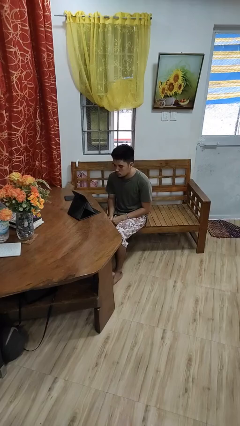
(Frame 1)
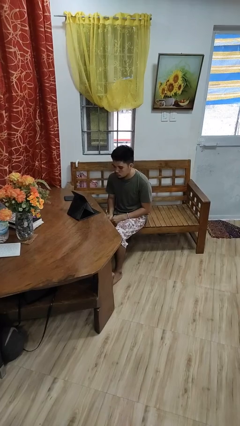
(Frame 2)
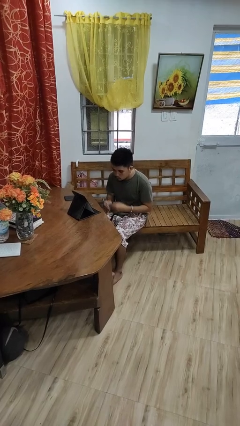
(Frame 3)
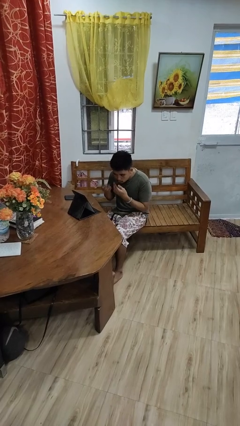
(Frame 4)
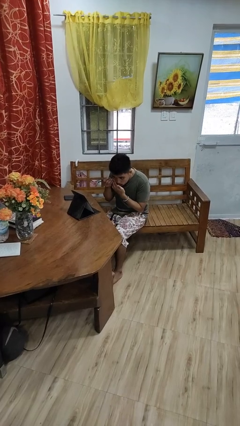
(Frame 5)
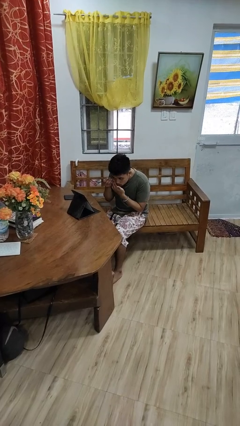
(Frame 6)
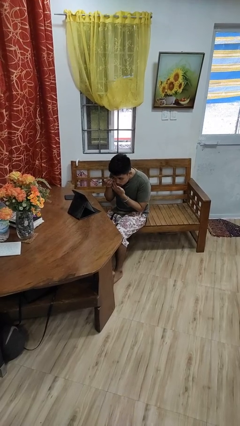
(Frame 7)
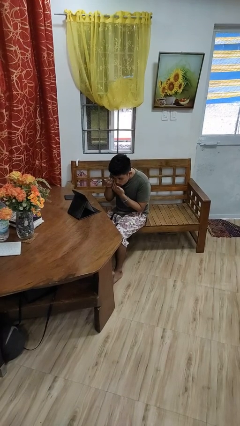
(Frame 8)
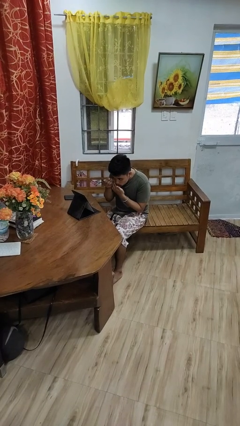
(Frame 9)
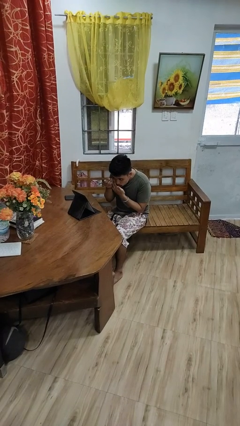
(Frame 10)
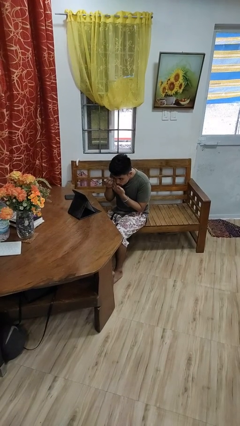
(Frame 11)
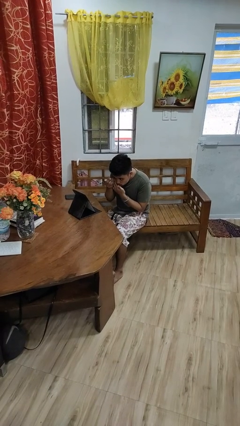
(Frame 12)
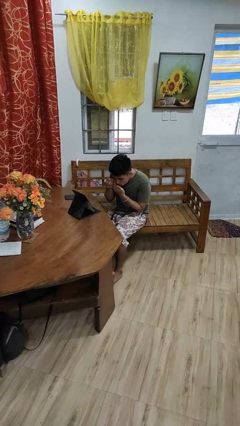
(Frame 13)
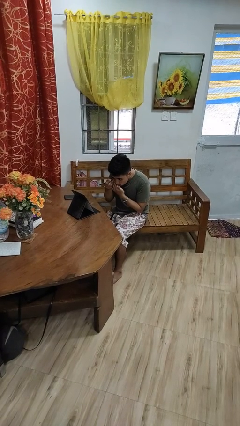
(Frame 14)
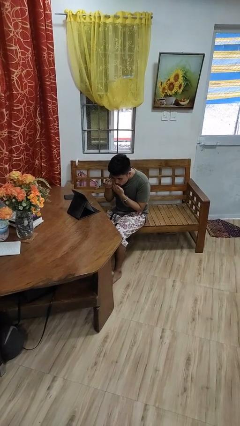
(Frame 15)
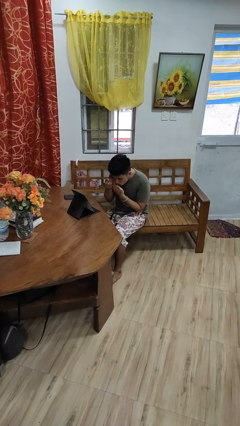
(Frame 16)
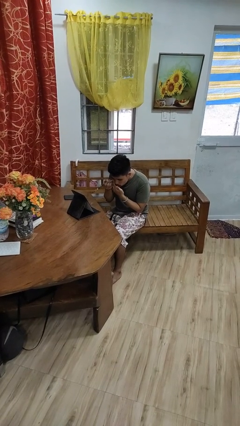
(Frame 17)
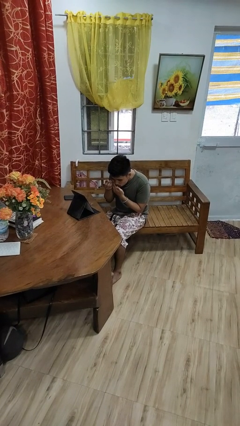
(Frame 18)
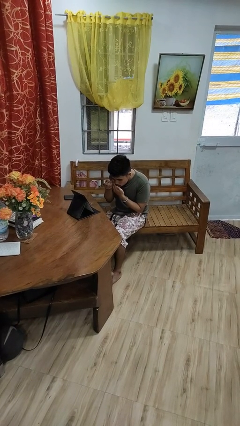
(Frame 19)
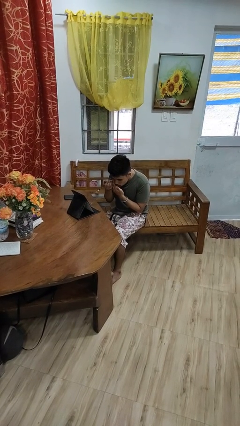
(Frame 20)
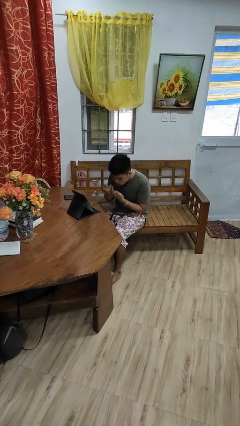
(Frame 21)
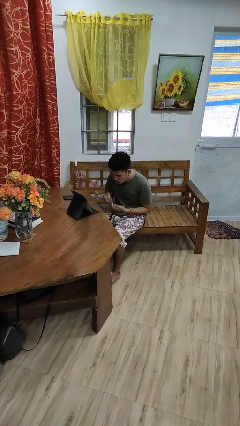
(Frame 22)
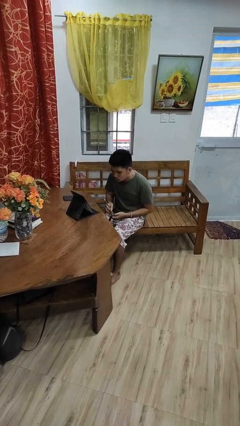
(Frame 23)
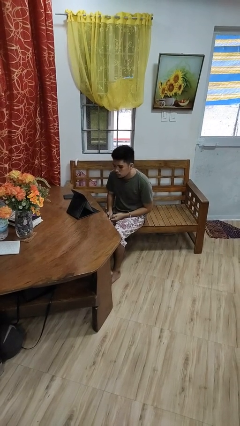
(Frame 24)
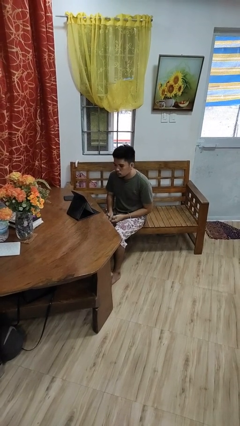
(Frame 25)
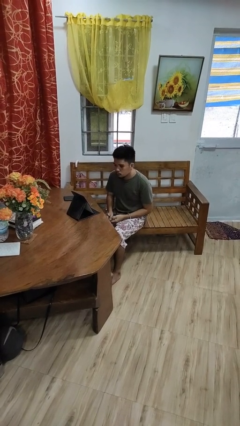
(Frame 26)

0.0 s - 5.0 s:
person applies eye makeup

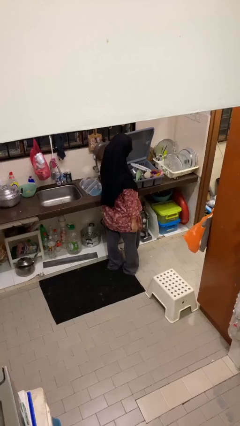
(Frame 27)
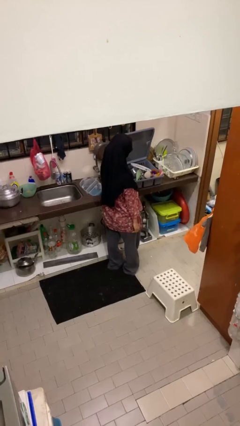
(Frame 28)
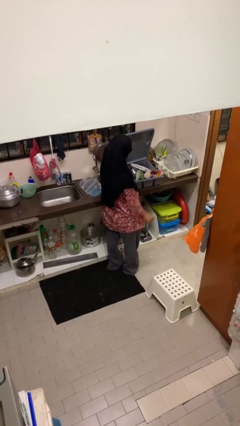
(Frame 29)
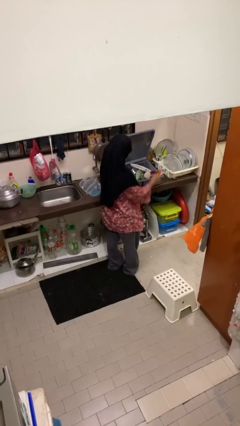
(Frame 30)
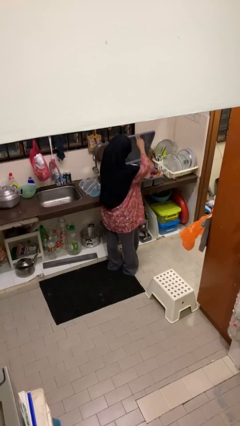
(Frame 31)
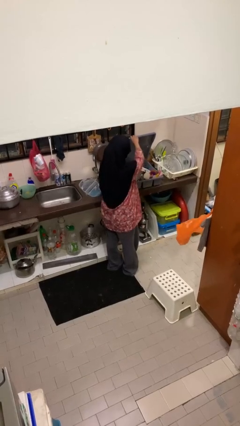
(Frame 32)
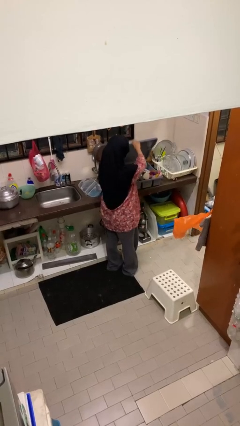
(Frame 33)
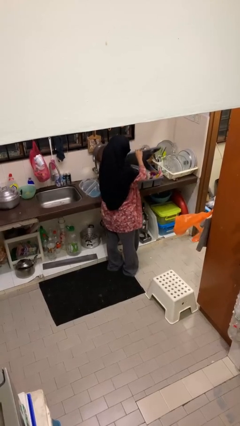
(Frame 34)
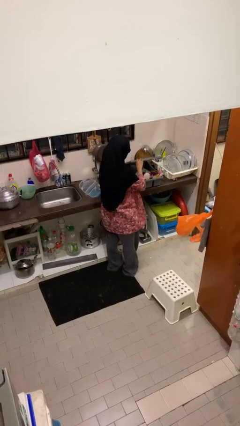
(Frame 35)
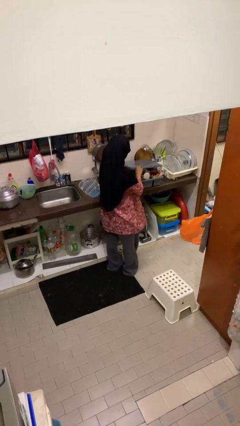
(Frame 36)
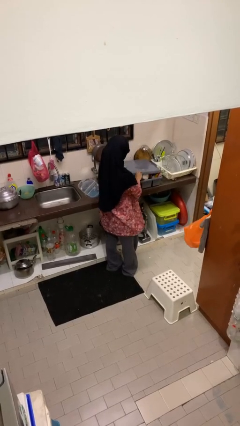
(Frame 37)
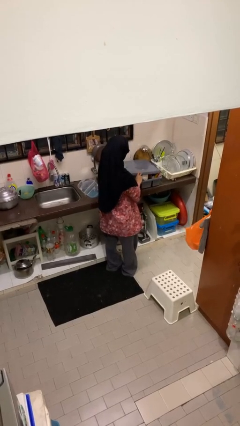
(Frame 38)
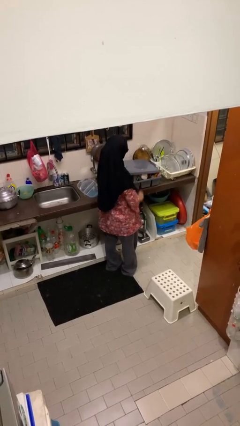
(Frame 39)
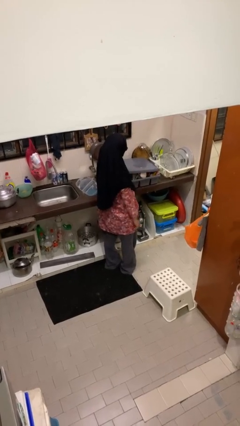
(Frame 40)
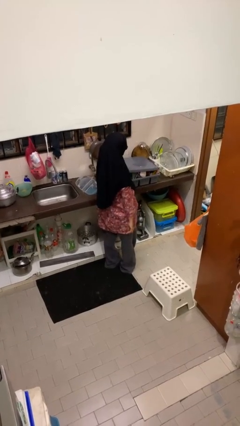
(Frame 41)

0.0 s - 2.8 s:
person closes dishwasher

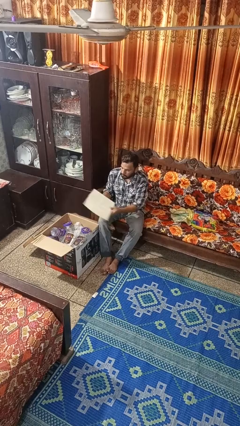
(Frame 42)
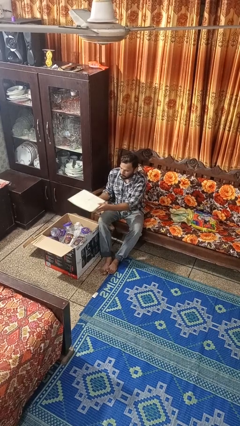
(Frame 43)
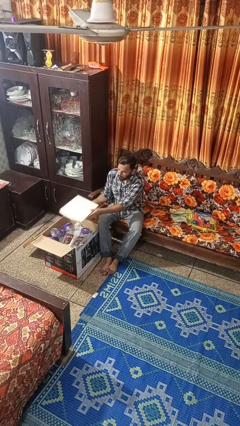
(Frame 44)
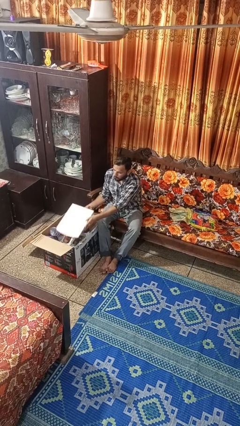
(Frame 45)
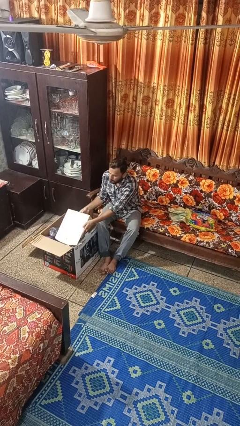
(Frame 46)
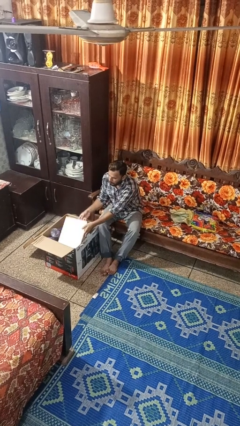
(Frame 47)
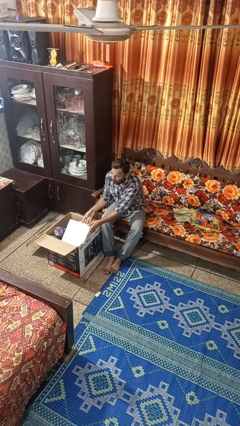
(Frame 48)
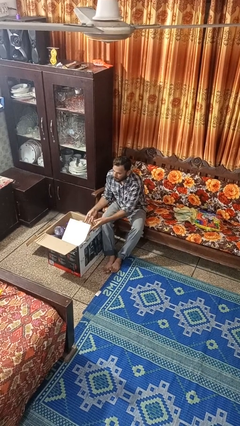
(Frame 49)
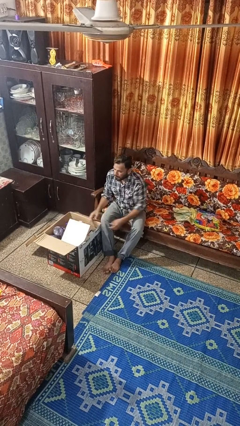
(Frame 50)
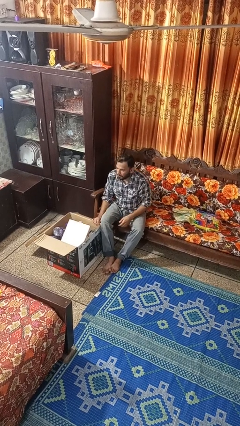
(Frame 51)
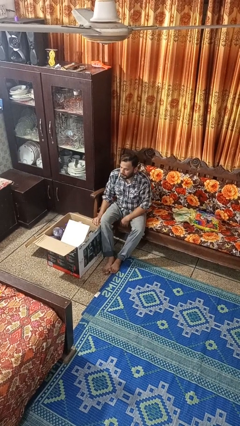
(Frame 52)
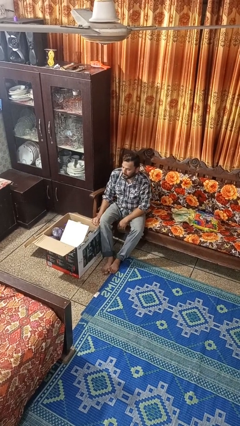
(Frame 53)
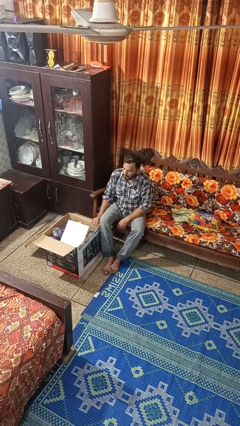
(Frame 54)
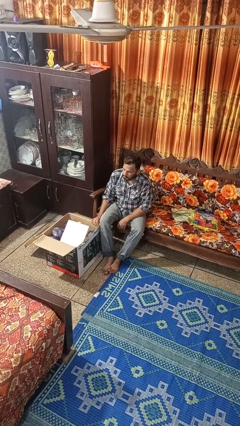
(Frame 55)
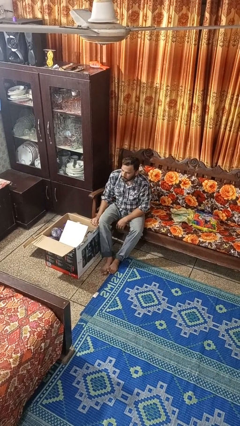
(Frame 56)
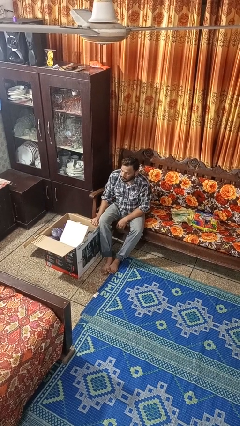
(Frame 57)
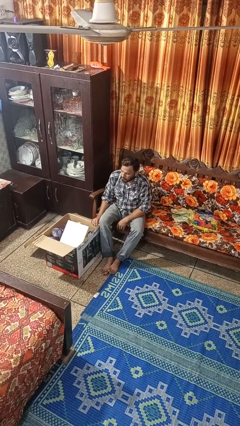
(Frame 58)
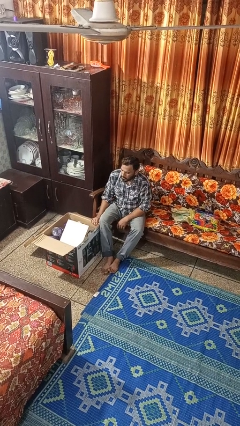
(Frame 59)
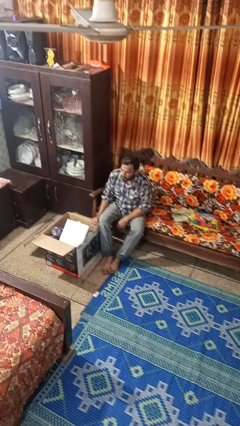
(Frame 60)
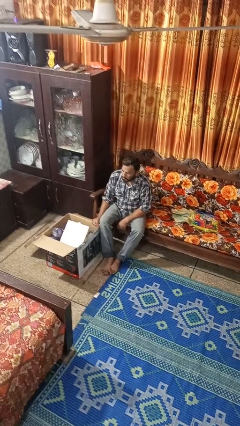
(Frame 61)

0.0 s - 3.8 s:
person puts object into box

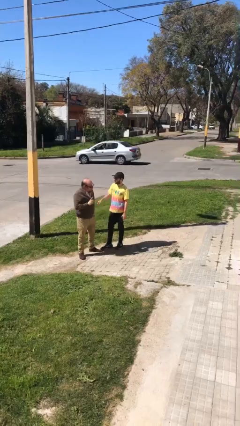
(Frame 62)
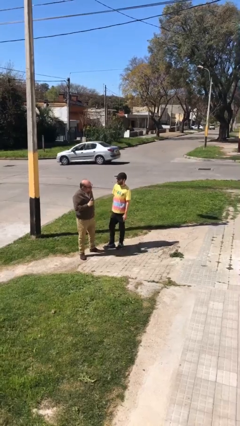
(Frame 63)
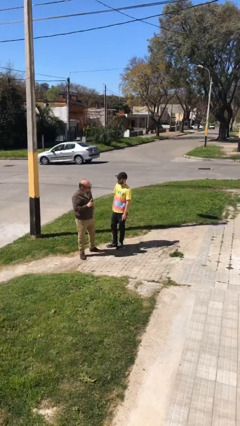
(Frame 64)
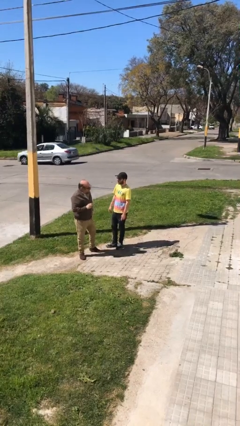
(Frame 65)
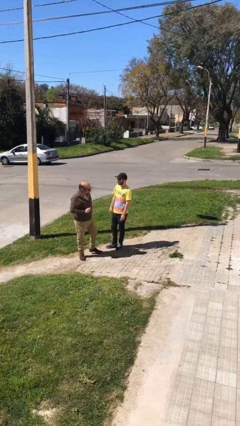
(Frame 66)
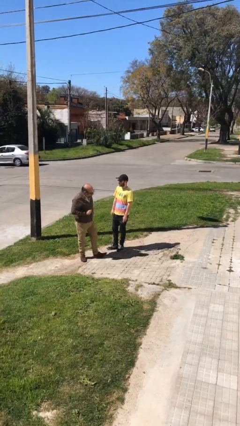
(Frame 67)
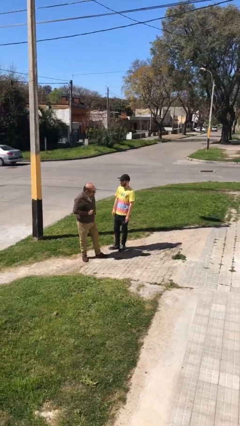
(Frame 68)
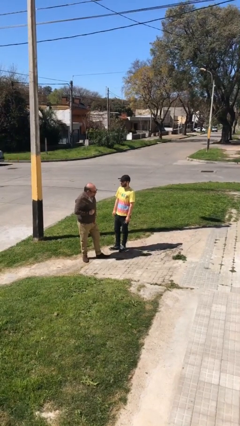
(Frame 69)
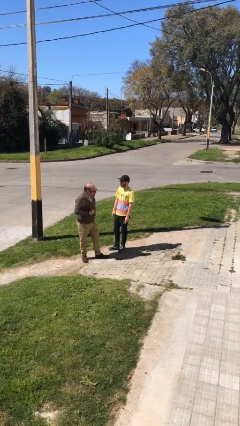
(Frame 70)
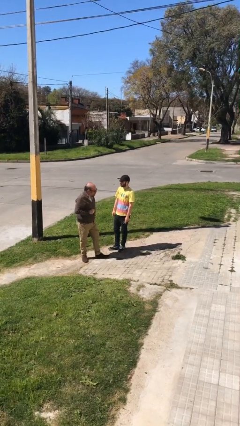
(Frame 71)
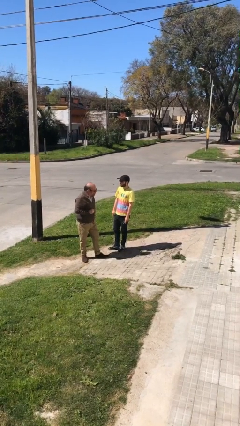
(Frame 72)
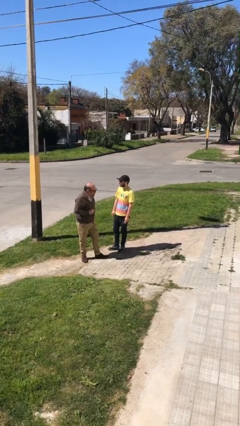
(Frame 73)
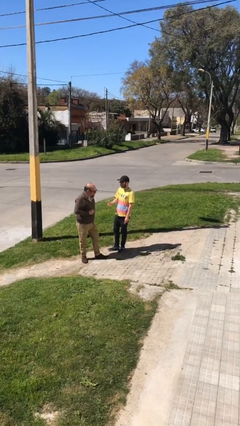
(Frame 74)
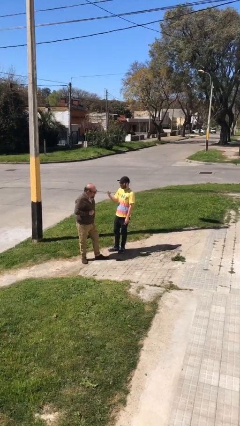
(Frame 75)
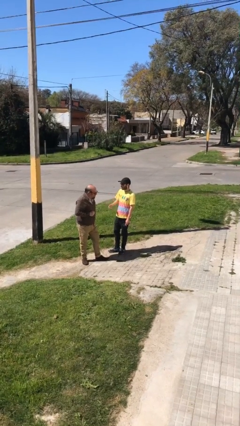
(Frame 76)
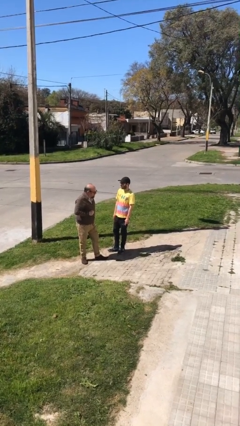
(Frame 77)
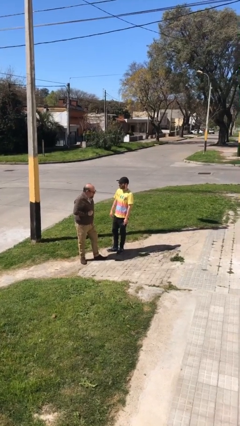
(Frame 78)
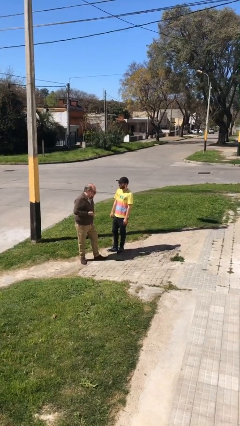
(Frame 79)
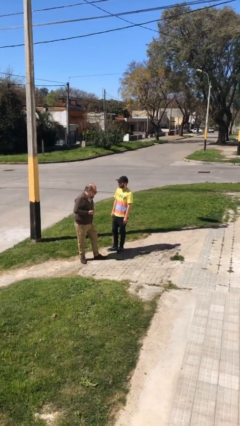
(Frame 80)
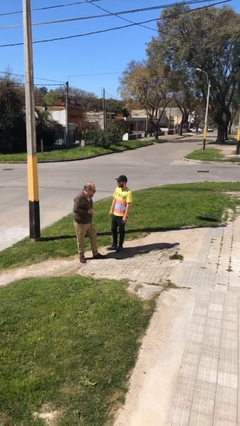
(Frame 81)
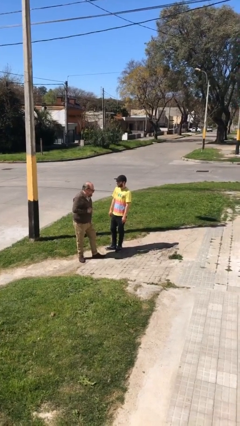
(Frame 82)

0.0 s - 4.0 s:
person talks to person

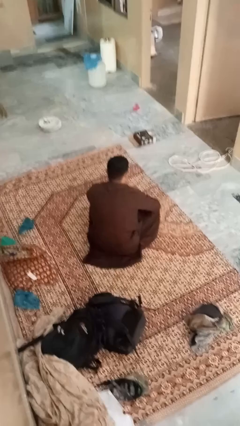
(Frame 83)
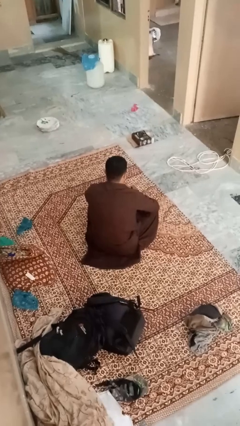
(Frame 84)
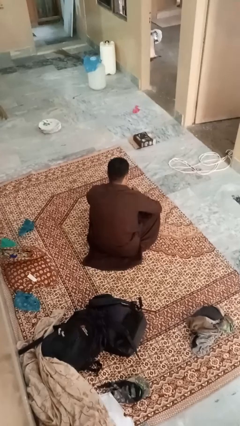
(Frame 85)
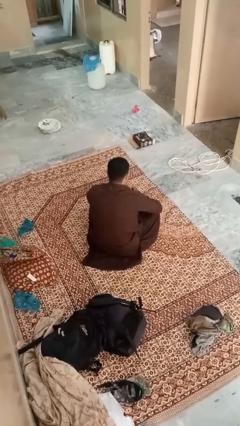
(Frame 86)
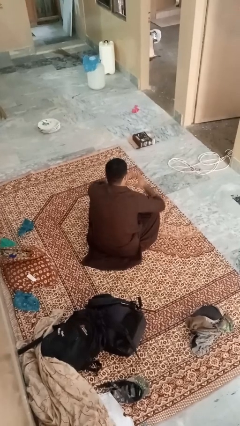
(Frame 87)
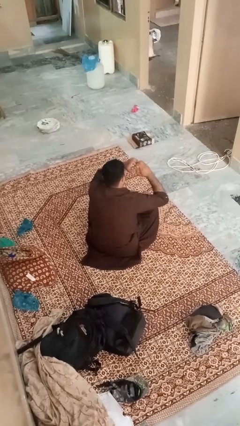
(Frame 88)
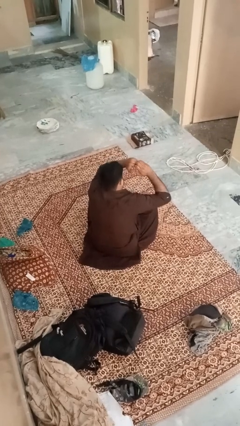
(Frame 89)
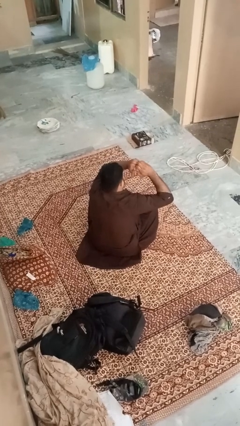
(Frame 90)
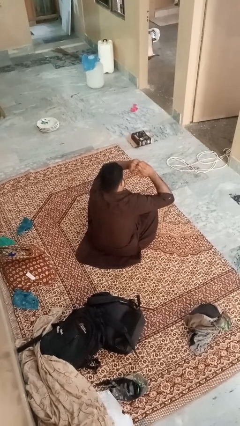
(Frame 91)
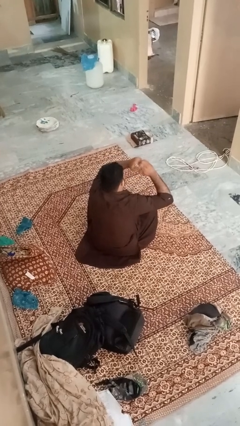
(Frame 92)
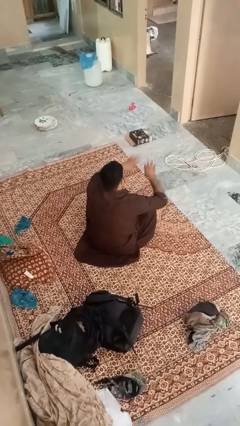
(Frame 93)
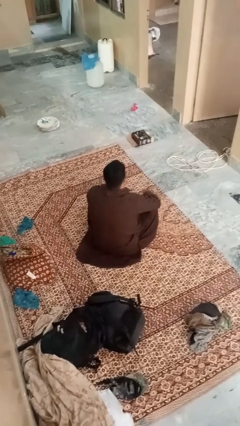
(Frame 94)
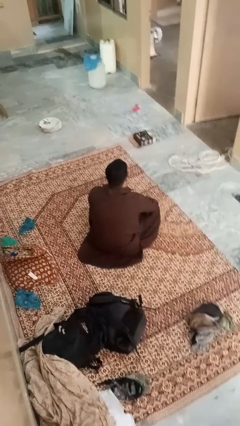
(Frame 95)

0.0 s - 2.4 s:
person gestures heart
